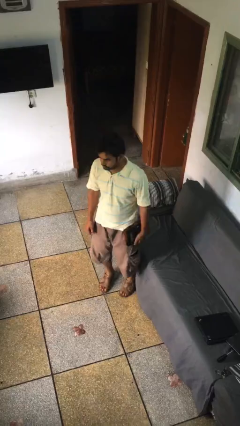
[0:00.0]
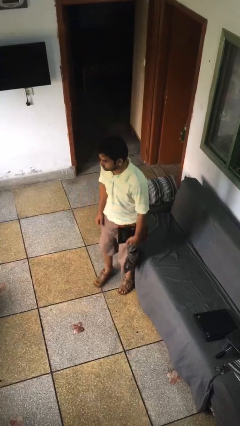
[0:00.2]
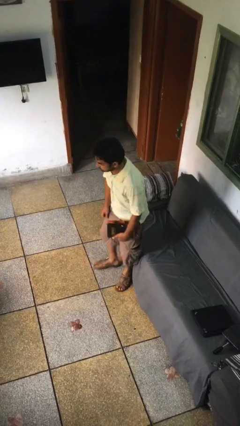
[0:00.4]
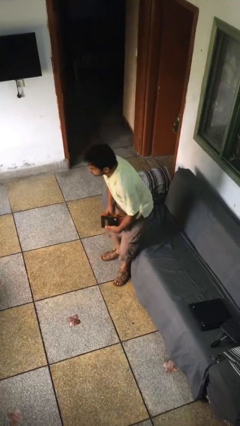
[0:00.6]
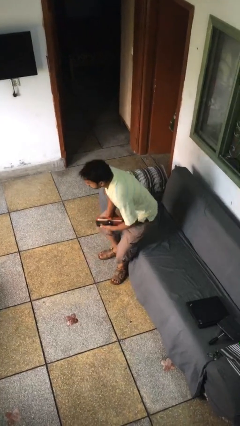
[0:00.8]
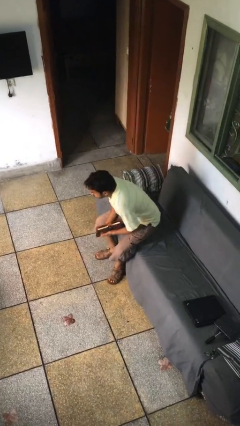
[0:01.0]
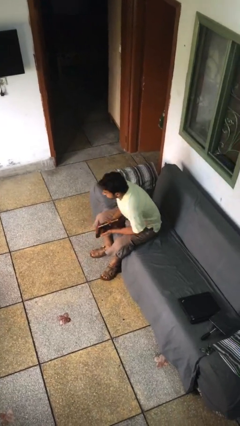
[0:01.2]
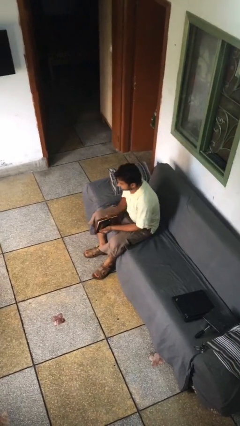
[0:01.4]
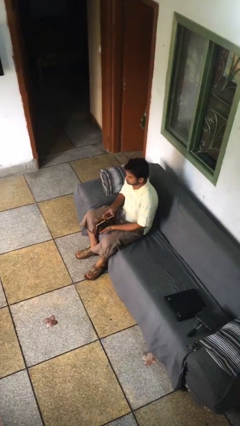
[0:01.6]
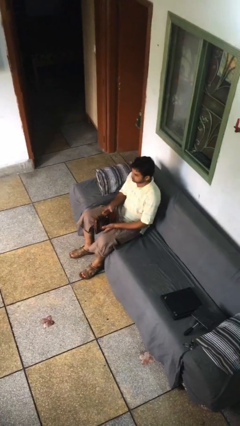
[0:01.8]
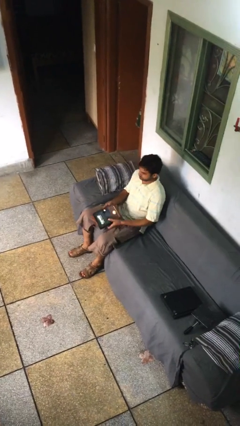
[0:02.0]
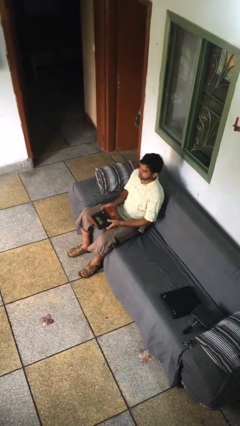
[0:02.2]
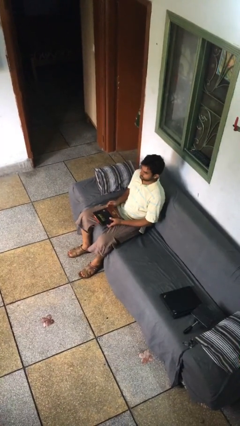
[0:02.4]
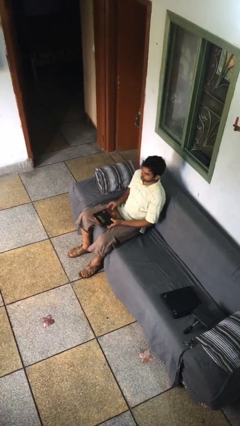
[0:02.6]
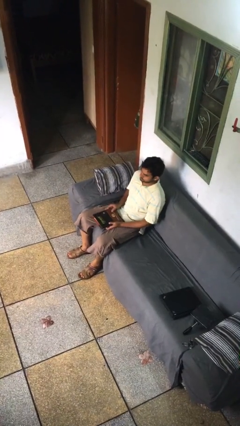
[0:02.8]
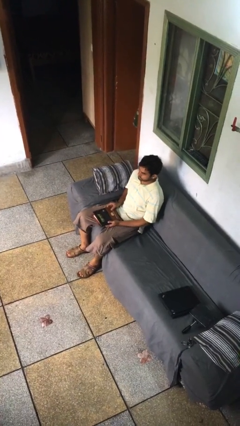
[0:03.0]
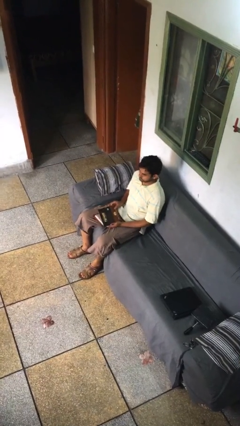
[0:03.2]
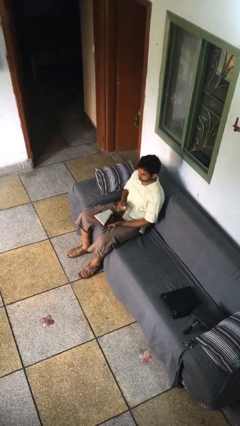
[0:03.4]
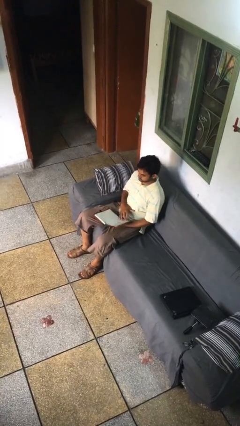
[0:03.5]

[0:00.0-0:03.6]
person sits down

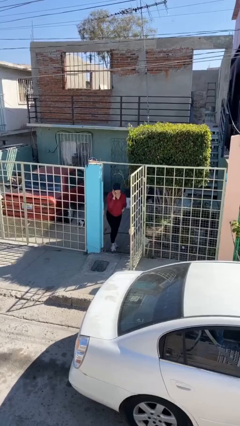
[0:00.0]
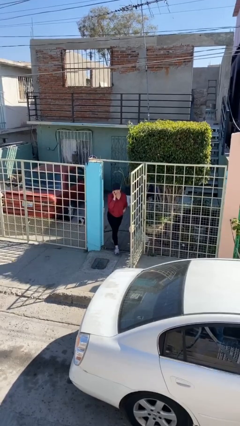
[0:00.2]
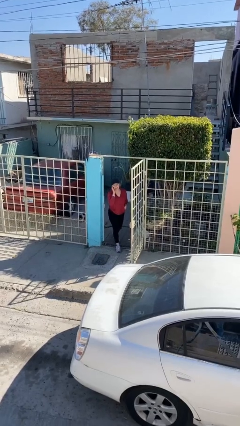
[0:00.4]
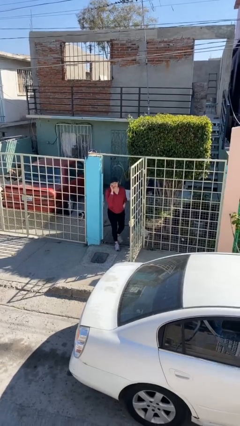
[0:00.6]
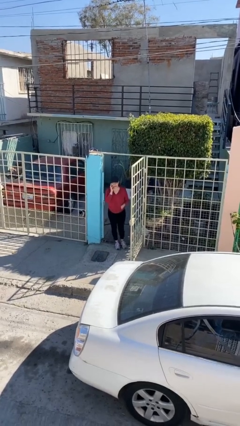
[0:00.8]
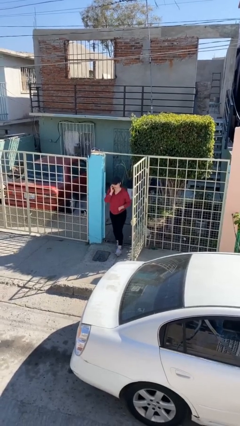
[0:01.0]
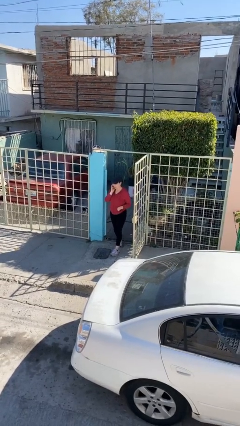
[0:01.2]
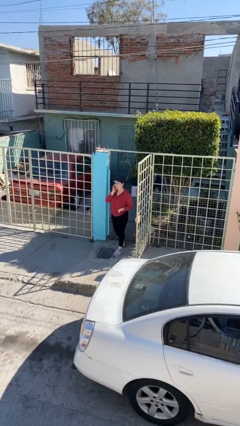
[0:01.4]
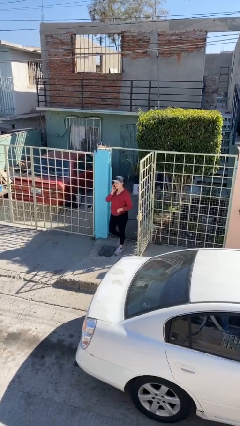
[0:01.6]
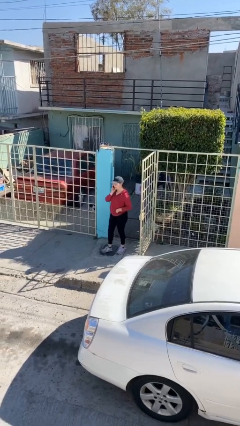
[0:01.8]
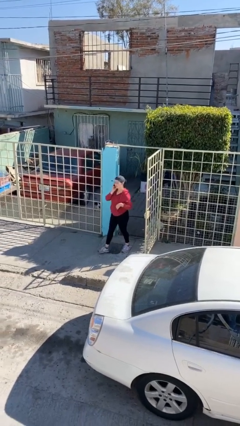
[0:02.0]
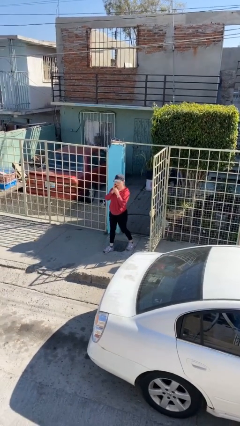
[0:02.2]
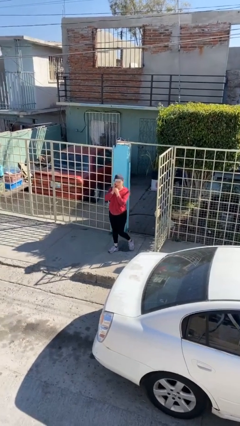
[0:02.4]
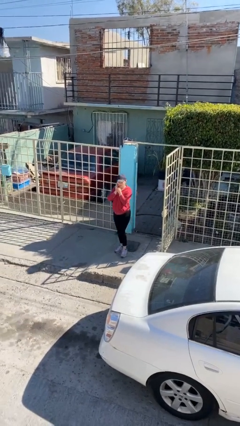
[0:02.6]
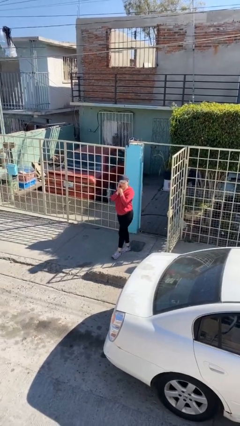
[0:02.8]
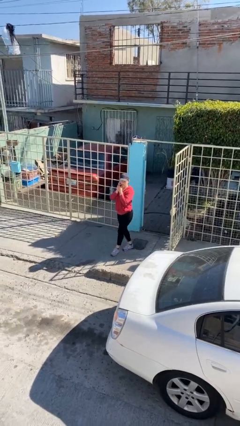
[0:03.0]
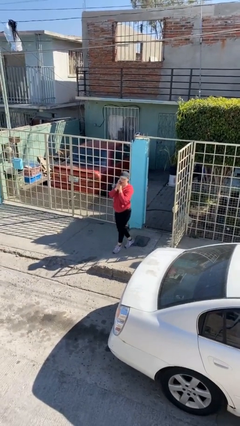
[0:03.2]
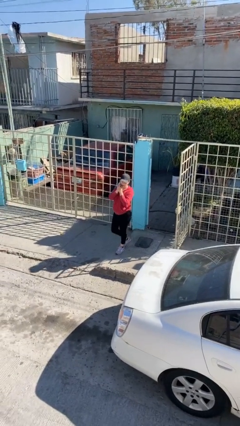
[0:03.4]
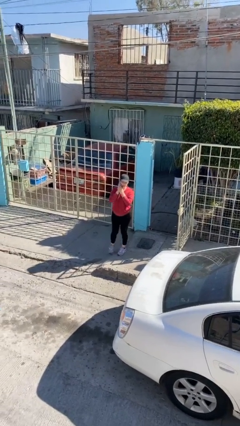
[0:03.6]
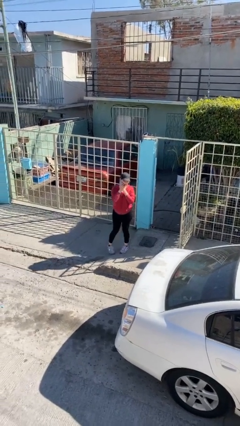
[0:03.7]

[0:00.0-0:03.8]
person enters scene through structure

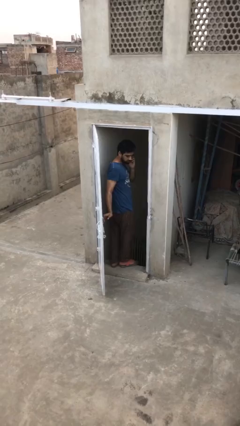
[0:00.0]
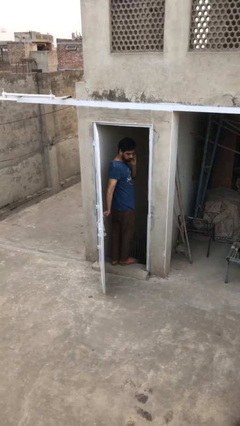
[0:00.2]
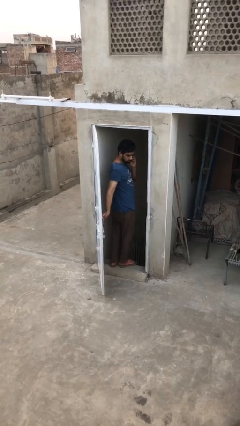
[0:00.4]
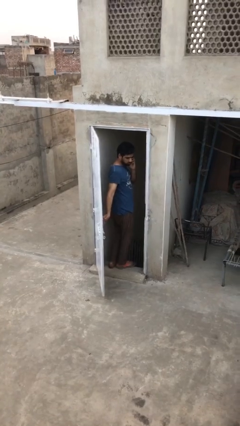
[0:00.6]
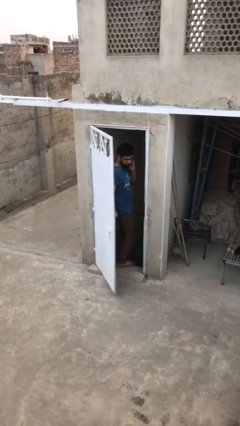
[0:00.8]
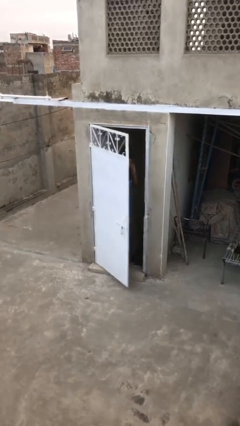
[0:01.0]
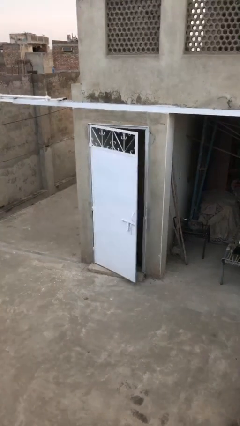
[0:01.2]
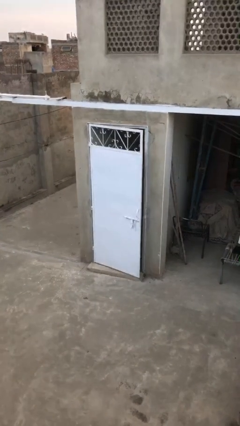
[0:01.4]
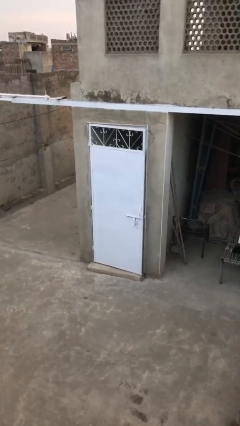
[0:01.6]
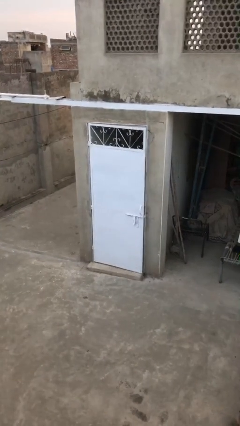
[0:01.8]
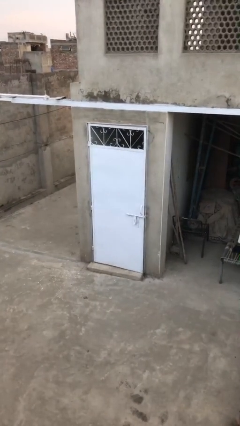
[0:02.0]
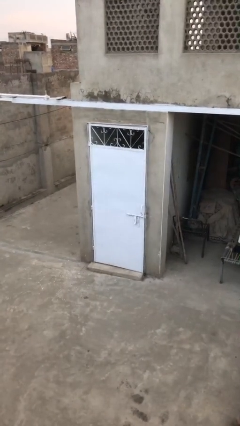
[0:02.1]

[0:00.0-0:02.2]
person closes facility door

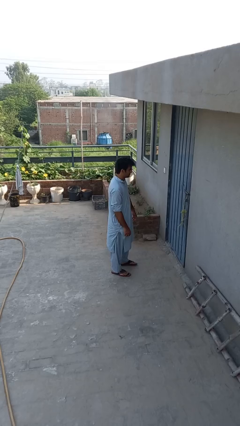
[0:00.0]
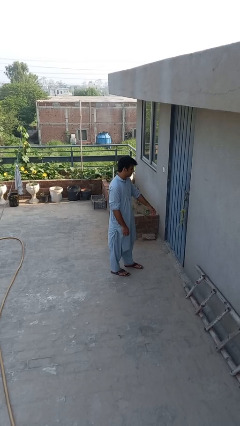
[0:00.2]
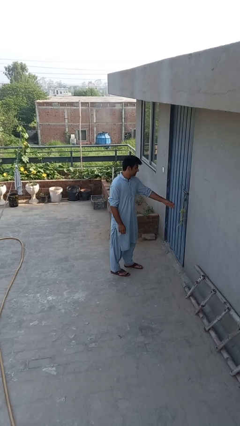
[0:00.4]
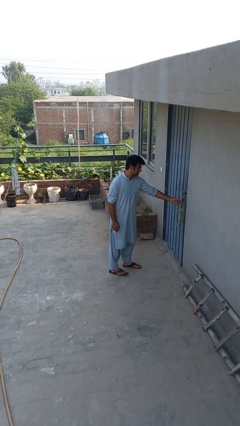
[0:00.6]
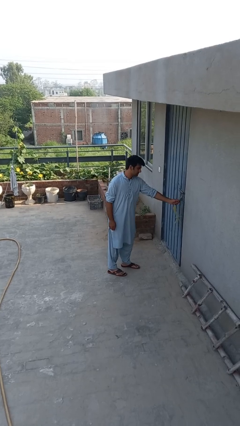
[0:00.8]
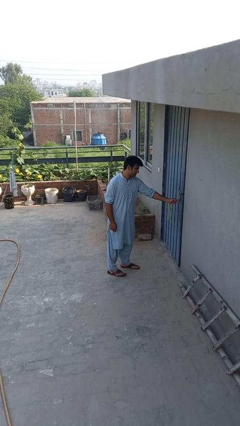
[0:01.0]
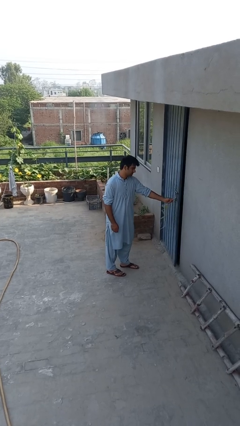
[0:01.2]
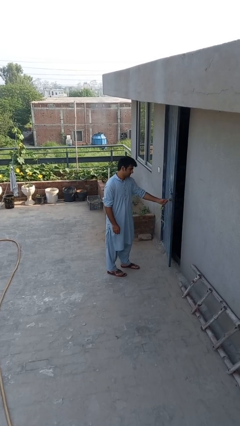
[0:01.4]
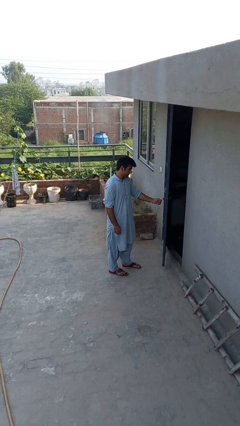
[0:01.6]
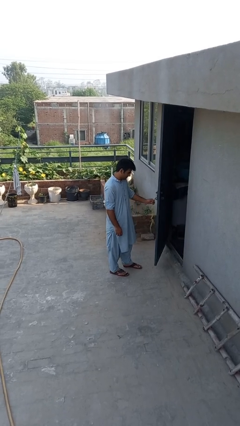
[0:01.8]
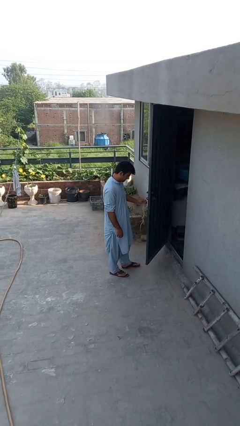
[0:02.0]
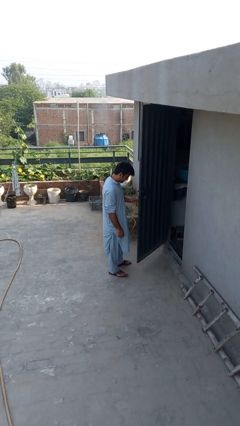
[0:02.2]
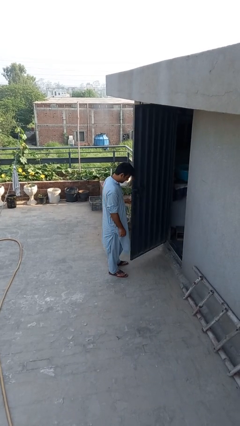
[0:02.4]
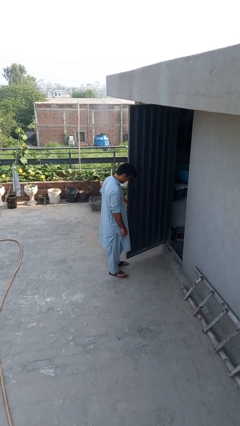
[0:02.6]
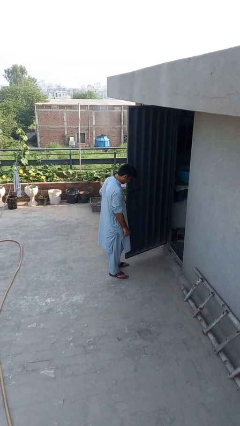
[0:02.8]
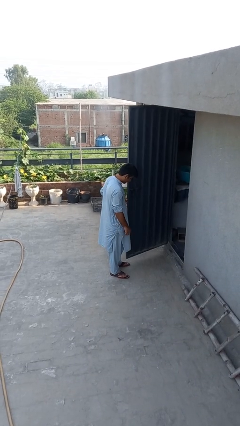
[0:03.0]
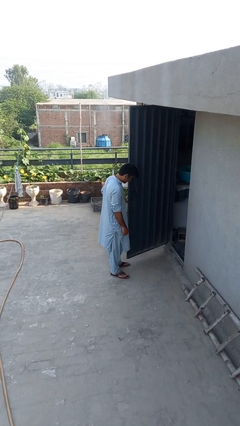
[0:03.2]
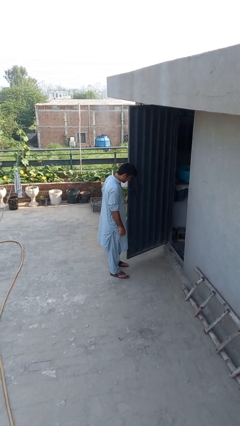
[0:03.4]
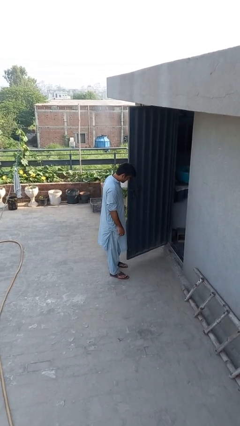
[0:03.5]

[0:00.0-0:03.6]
person opens facility door

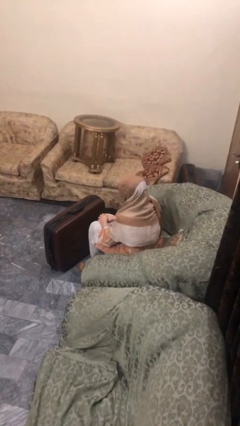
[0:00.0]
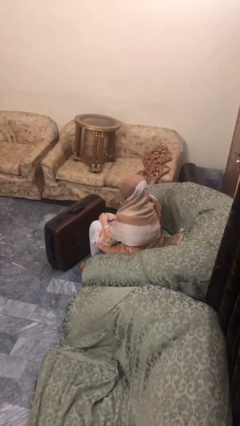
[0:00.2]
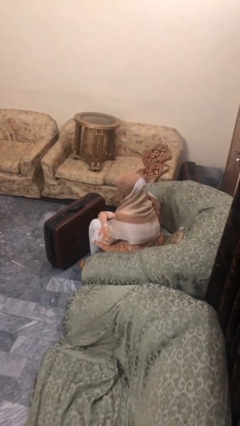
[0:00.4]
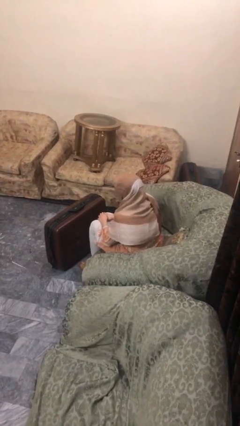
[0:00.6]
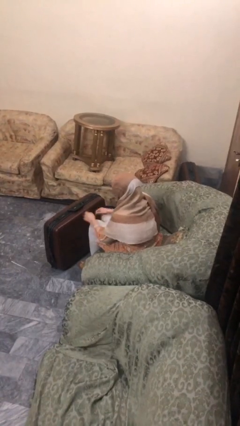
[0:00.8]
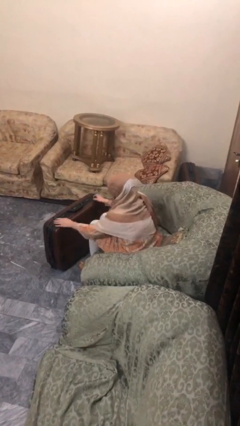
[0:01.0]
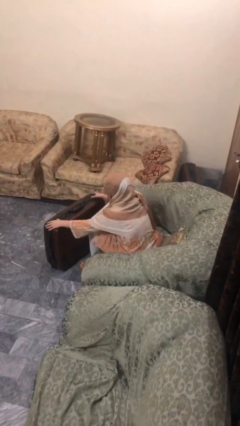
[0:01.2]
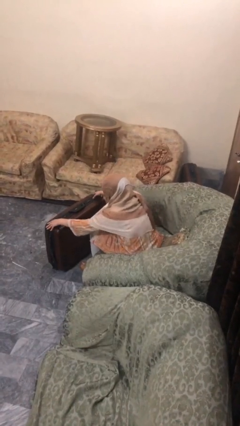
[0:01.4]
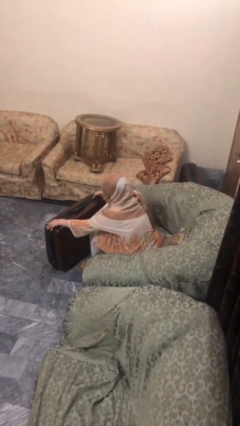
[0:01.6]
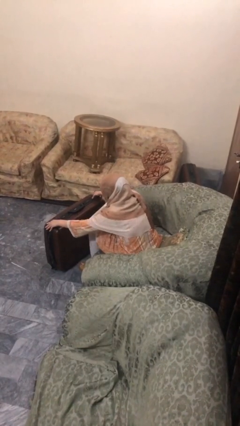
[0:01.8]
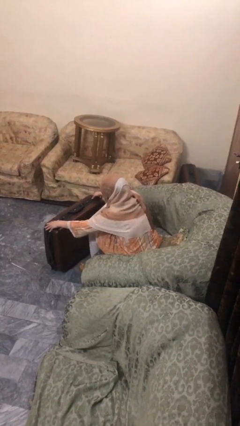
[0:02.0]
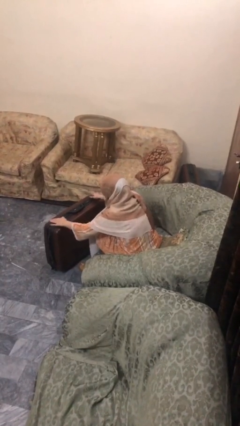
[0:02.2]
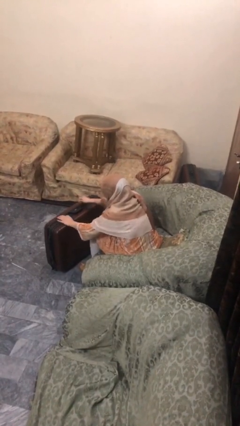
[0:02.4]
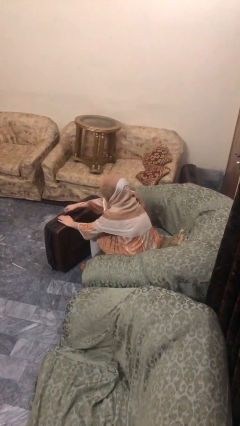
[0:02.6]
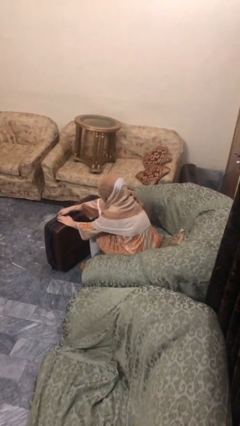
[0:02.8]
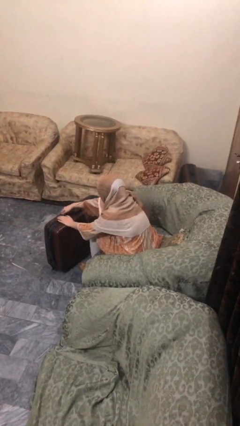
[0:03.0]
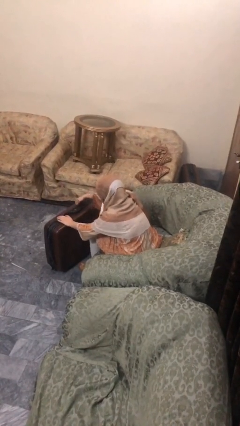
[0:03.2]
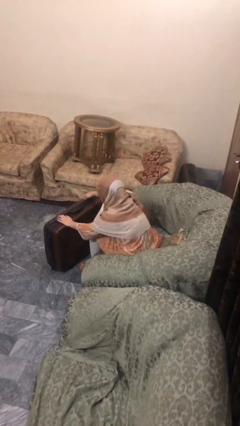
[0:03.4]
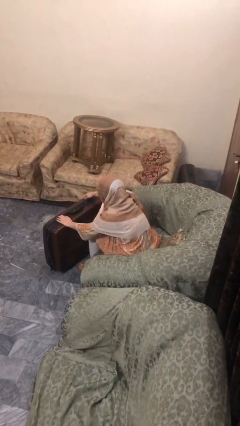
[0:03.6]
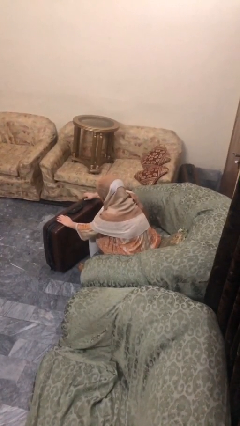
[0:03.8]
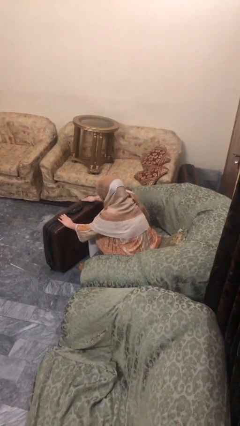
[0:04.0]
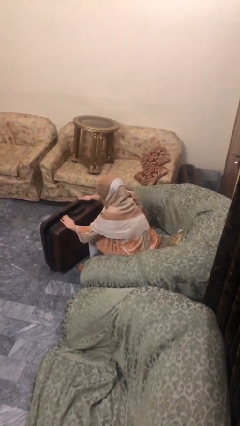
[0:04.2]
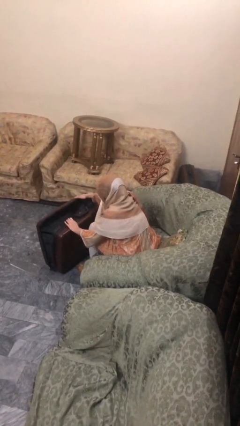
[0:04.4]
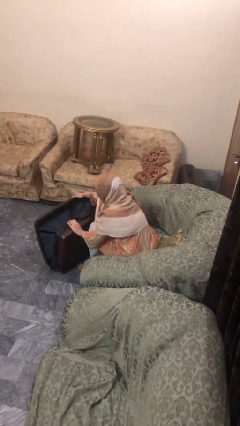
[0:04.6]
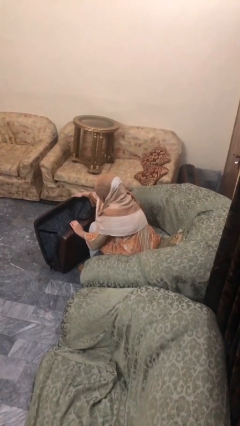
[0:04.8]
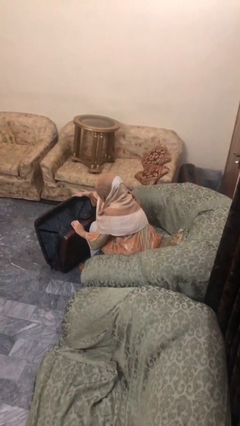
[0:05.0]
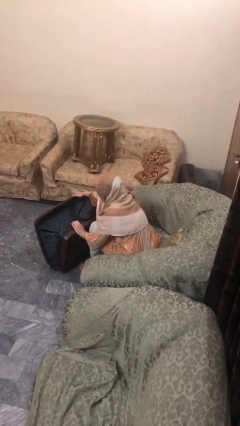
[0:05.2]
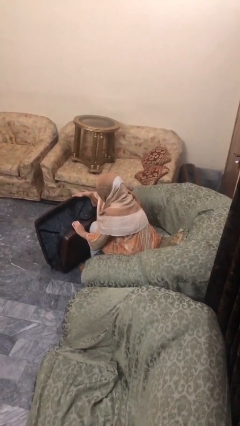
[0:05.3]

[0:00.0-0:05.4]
person opens suitcase
